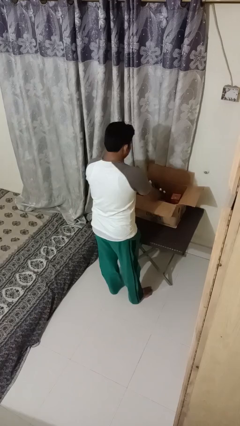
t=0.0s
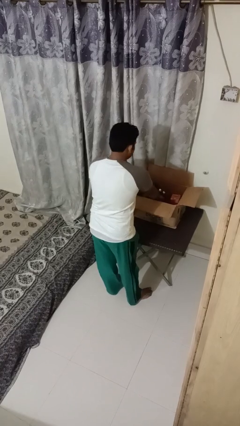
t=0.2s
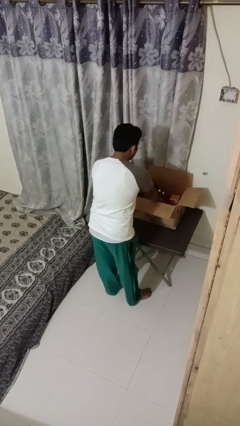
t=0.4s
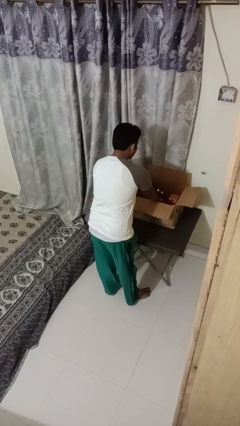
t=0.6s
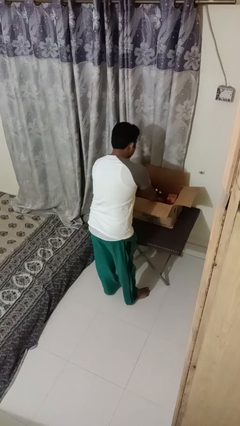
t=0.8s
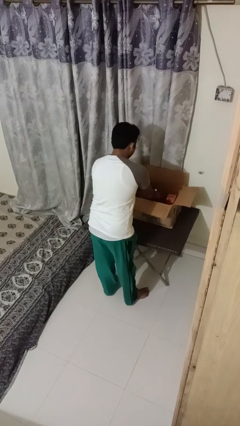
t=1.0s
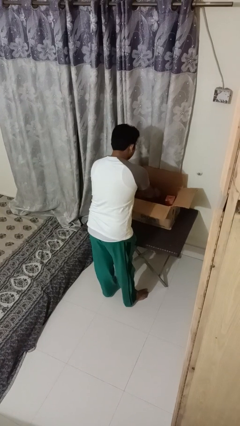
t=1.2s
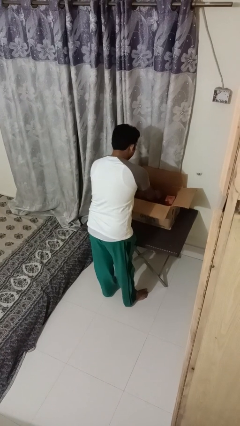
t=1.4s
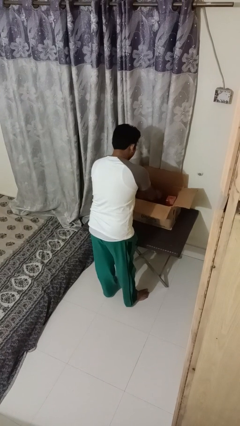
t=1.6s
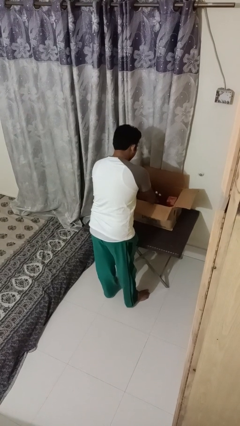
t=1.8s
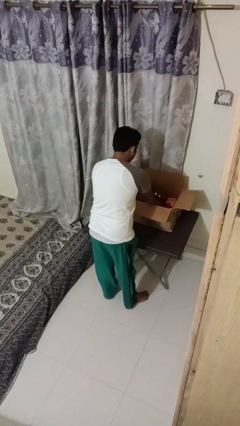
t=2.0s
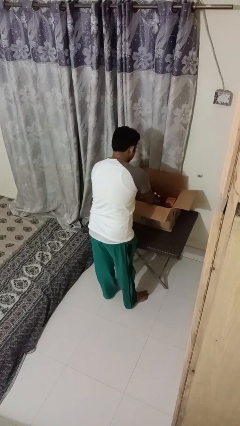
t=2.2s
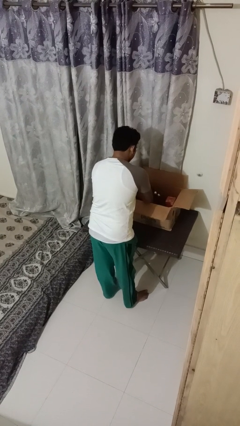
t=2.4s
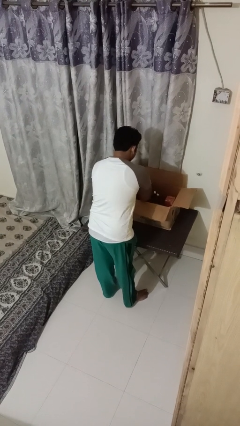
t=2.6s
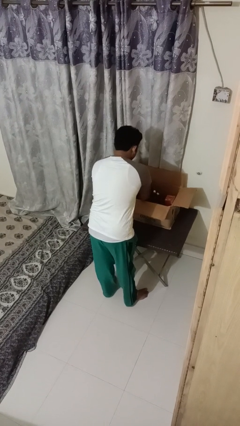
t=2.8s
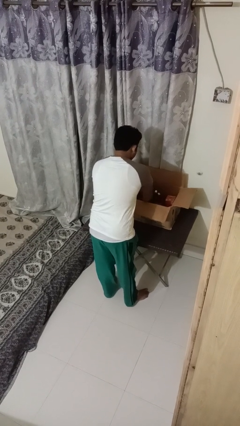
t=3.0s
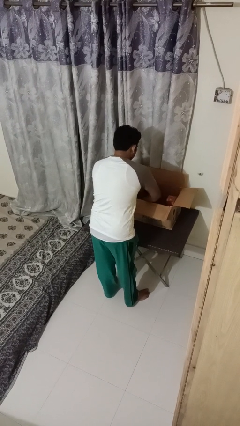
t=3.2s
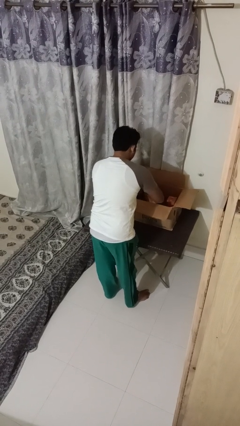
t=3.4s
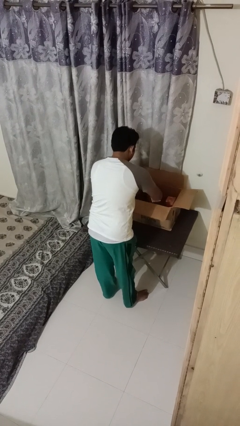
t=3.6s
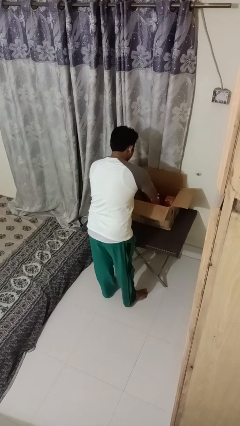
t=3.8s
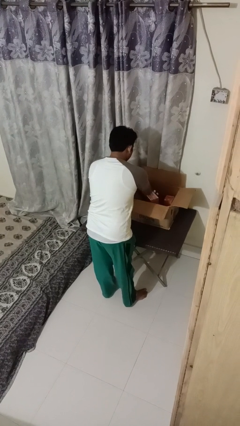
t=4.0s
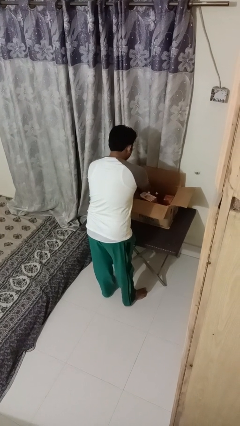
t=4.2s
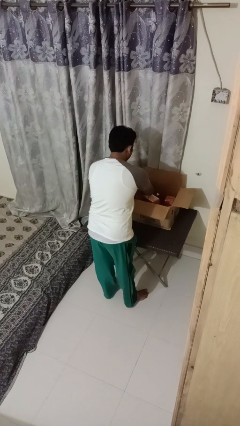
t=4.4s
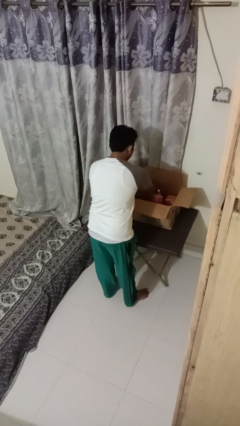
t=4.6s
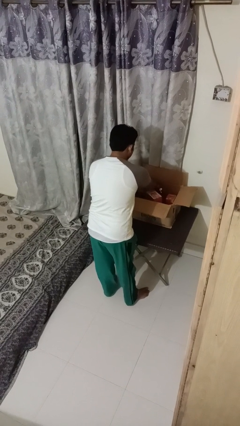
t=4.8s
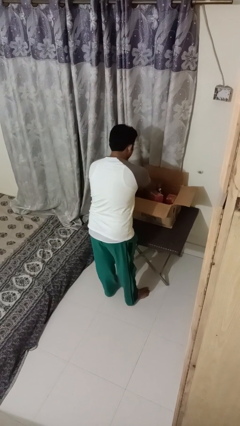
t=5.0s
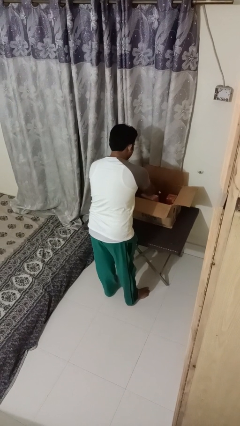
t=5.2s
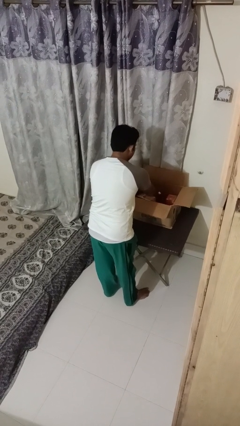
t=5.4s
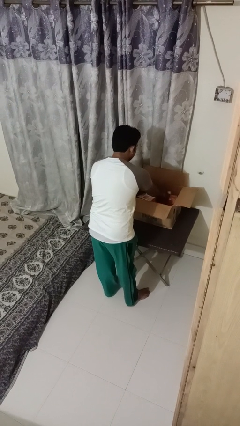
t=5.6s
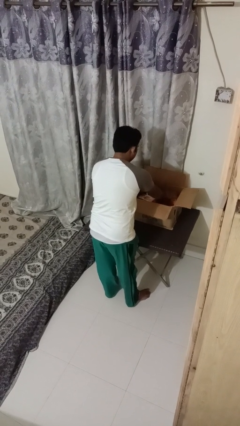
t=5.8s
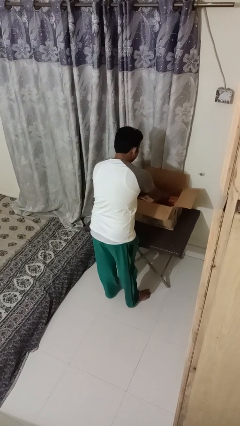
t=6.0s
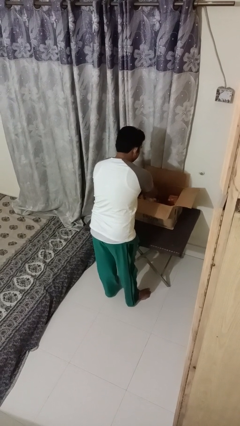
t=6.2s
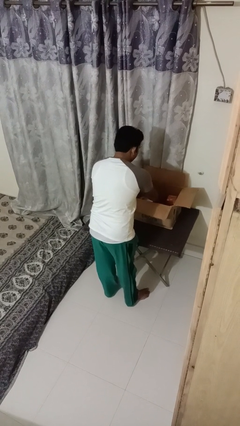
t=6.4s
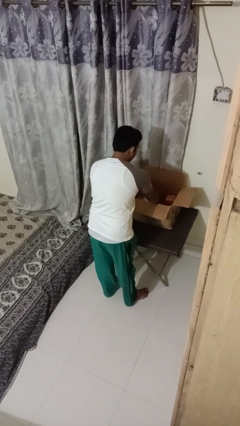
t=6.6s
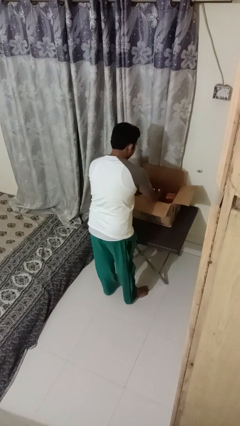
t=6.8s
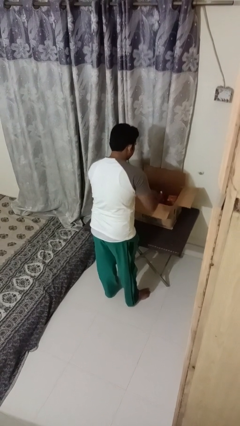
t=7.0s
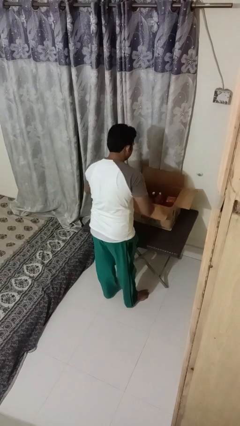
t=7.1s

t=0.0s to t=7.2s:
person searches in box

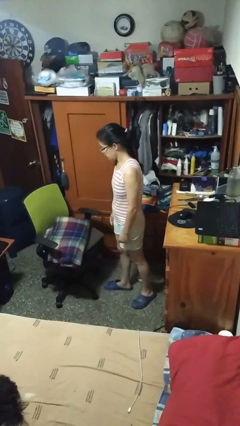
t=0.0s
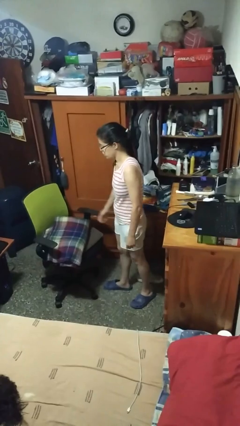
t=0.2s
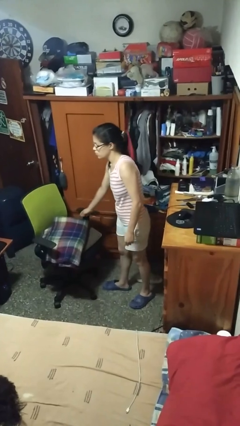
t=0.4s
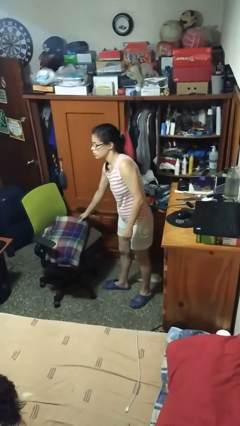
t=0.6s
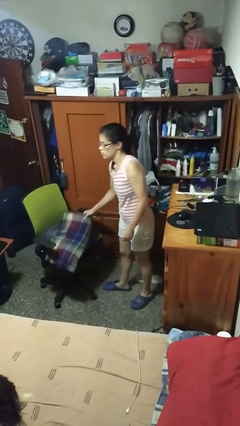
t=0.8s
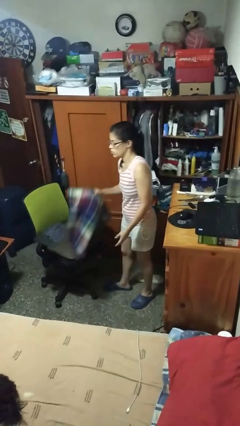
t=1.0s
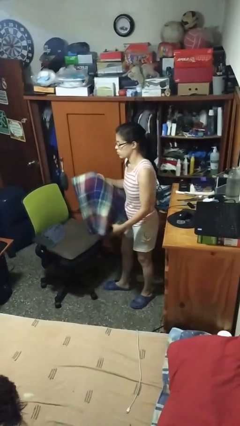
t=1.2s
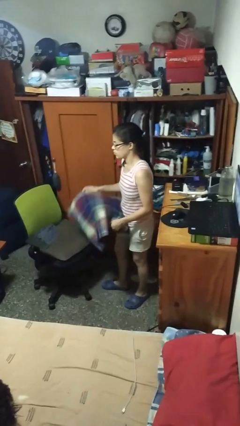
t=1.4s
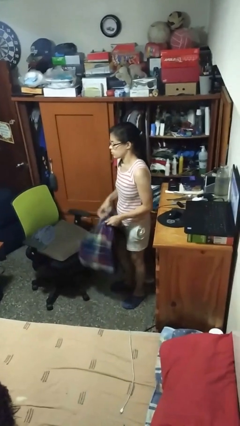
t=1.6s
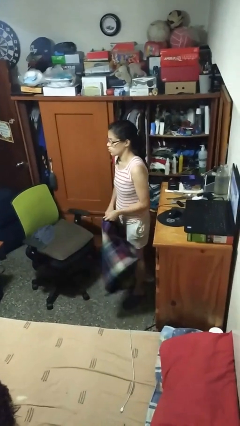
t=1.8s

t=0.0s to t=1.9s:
person unfolds blanket

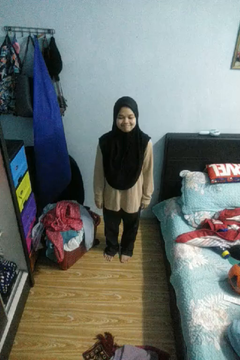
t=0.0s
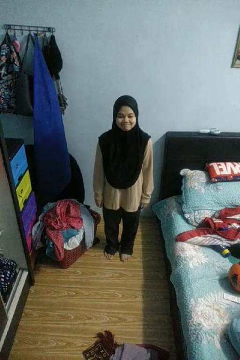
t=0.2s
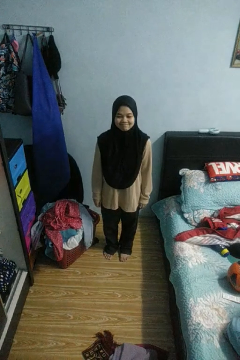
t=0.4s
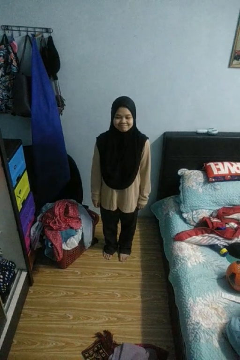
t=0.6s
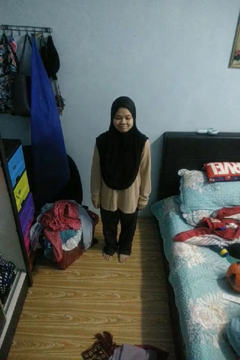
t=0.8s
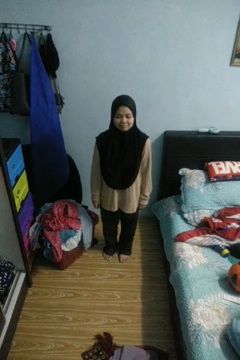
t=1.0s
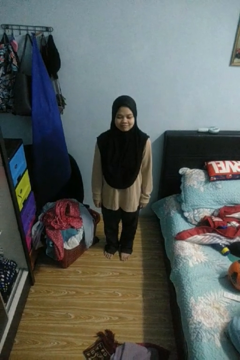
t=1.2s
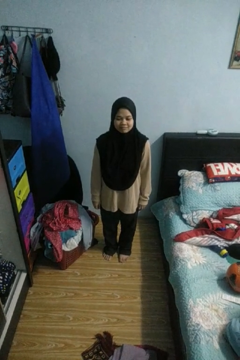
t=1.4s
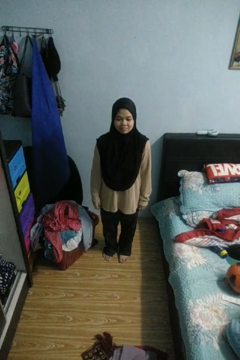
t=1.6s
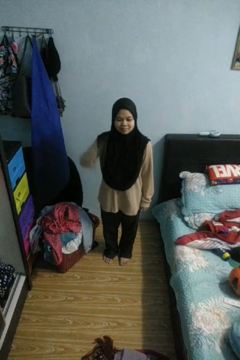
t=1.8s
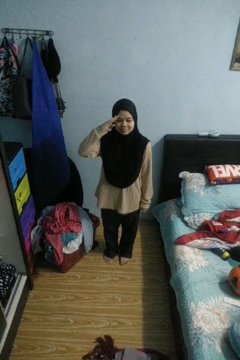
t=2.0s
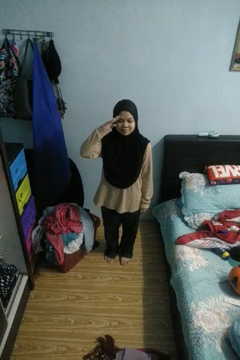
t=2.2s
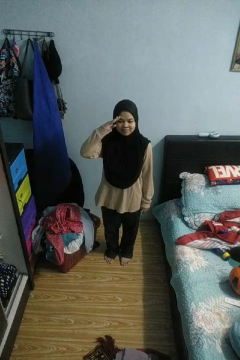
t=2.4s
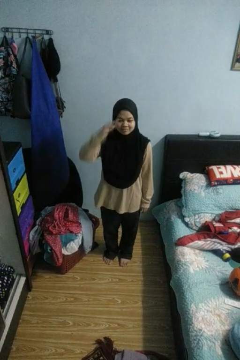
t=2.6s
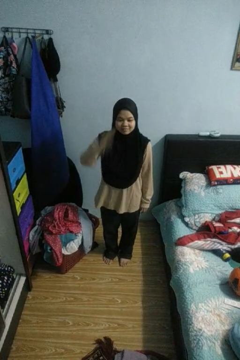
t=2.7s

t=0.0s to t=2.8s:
person salutes

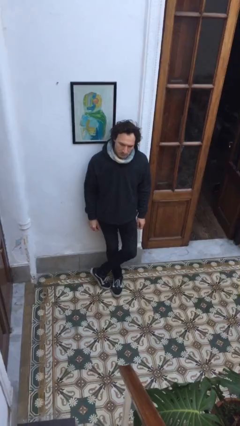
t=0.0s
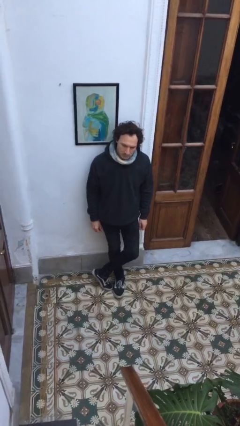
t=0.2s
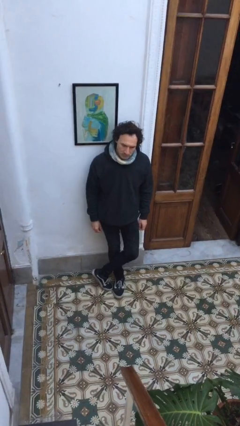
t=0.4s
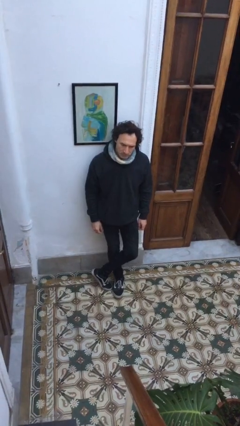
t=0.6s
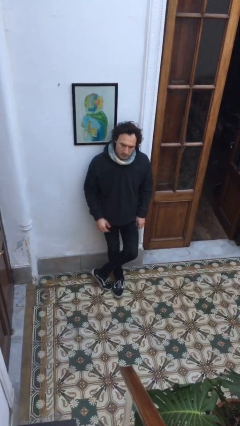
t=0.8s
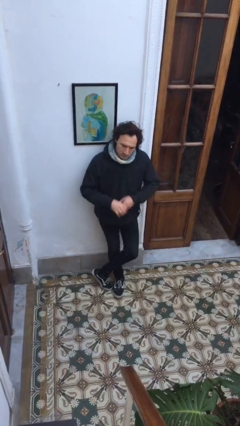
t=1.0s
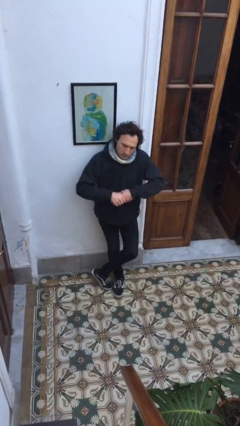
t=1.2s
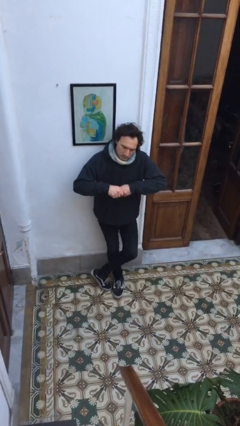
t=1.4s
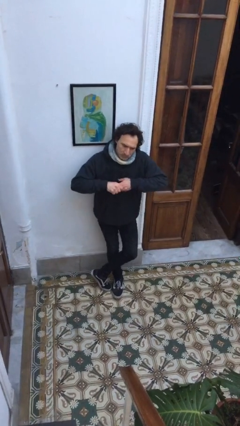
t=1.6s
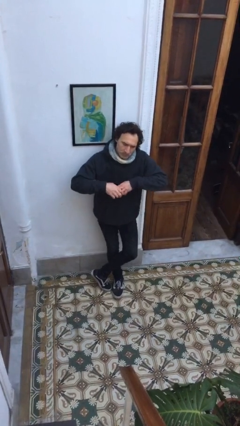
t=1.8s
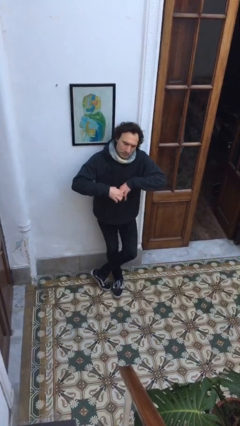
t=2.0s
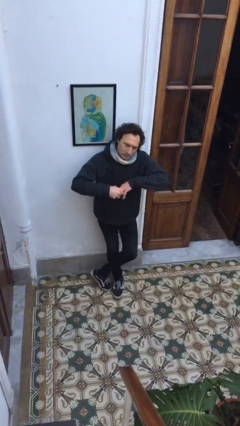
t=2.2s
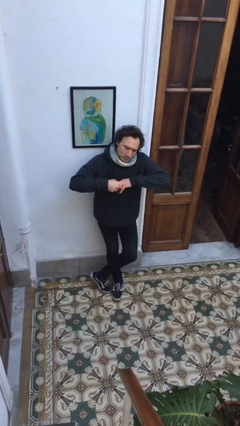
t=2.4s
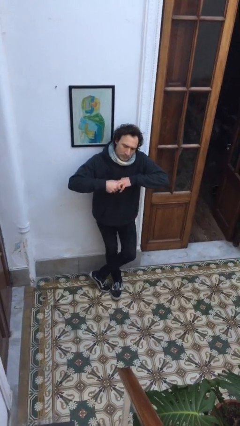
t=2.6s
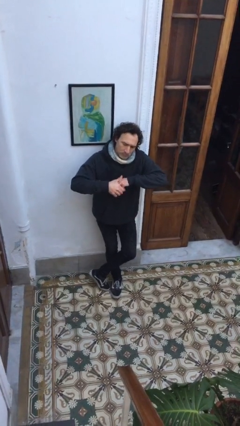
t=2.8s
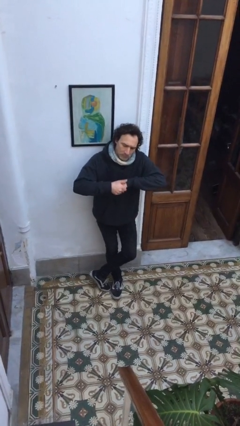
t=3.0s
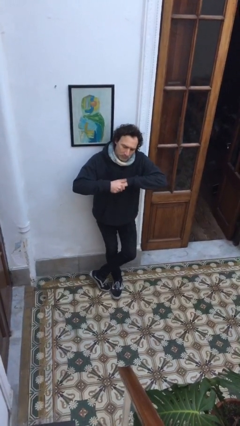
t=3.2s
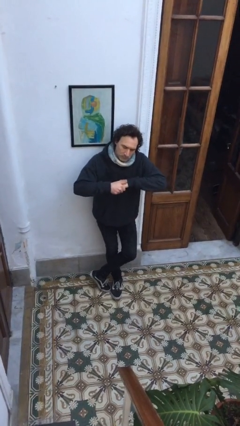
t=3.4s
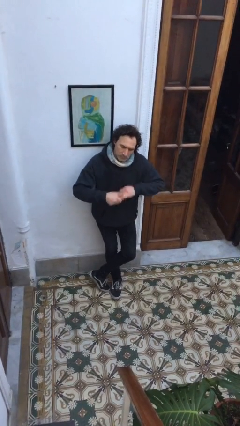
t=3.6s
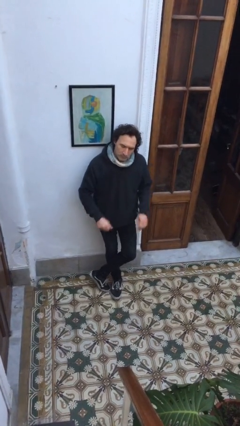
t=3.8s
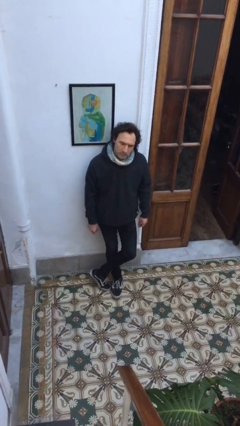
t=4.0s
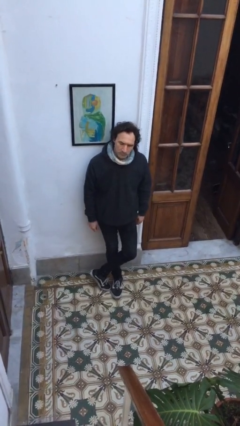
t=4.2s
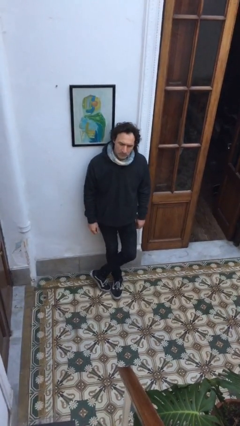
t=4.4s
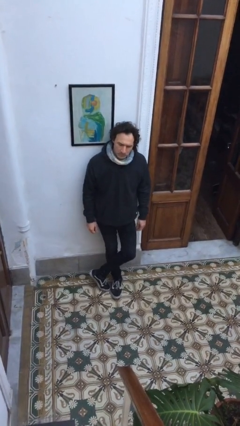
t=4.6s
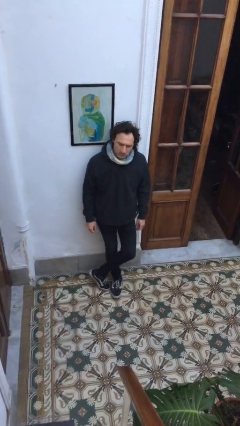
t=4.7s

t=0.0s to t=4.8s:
person cracks knuckles

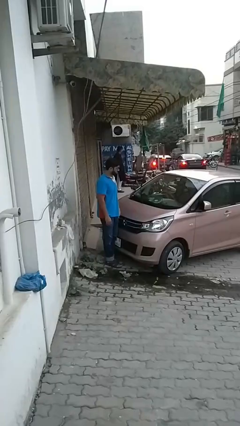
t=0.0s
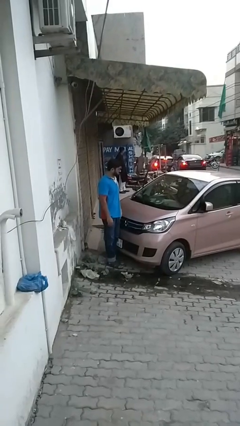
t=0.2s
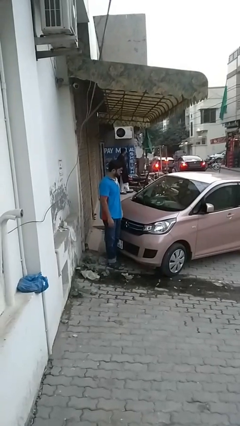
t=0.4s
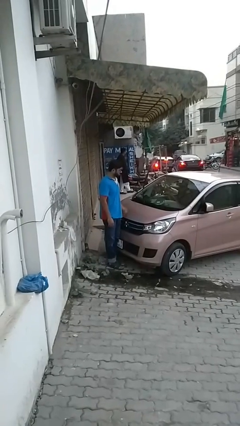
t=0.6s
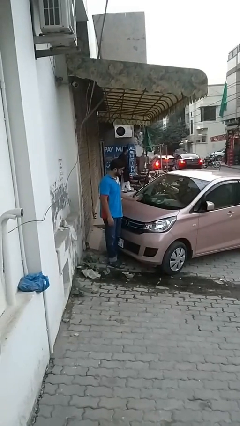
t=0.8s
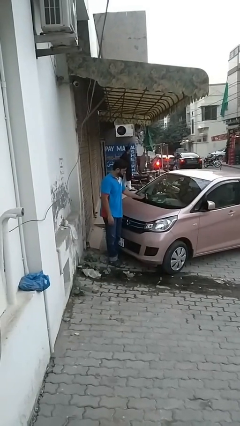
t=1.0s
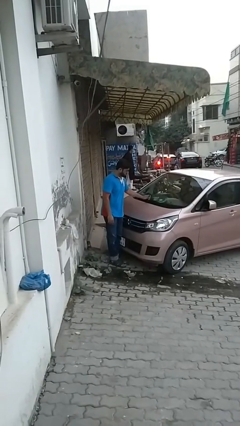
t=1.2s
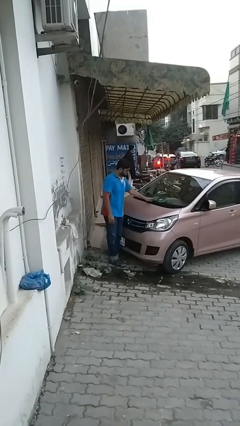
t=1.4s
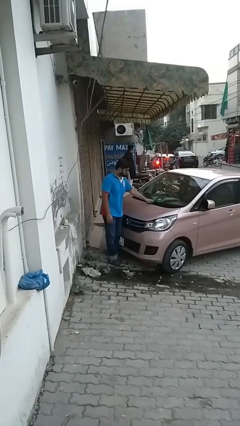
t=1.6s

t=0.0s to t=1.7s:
person flips down car wipers
